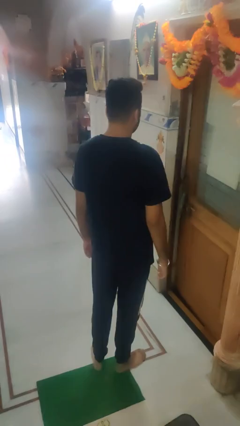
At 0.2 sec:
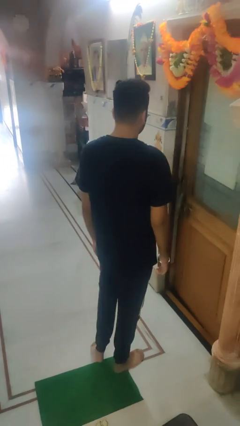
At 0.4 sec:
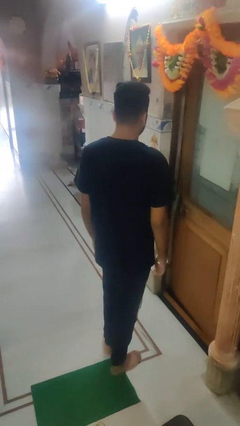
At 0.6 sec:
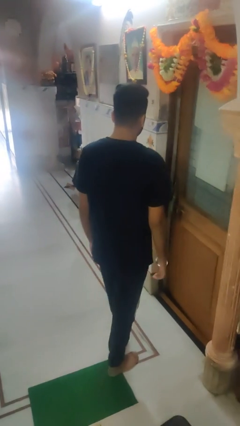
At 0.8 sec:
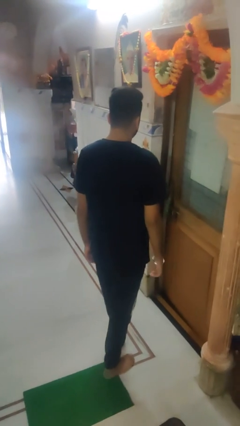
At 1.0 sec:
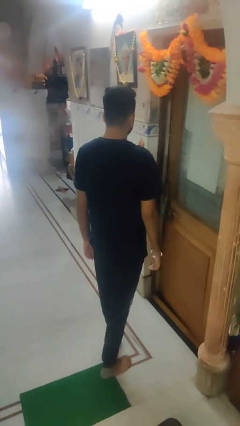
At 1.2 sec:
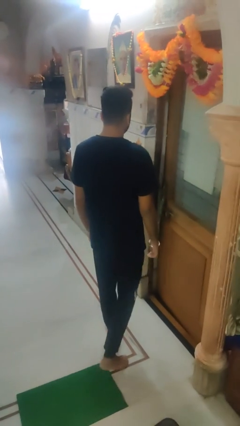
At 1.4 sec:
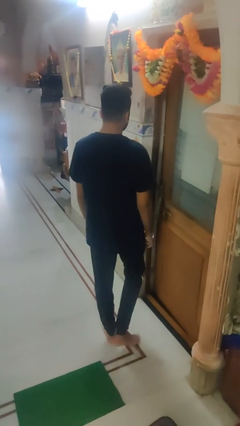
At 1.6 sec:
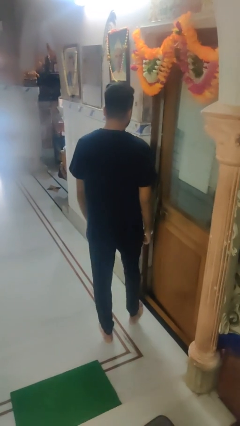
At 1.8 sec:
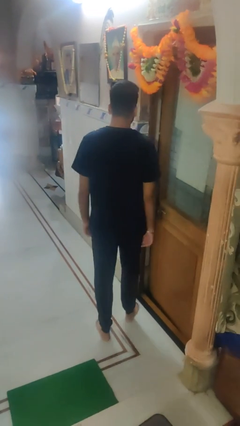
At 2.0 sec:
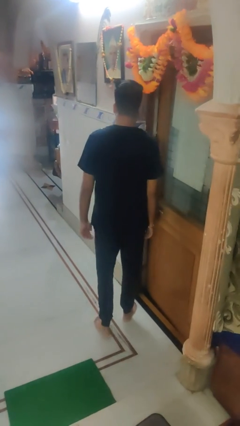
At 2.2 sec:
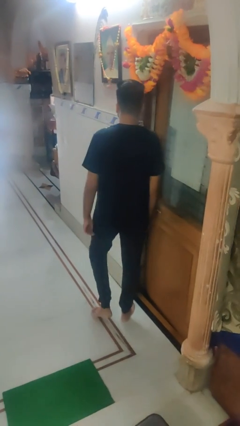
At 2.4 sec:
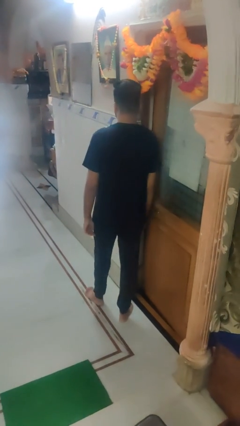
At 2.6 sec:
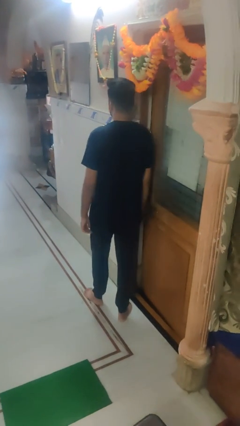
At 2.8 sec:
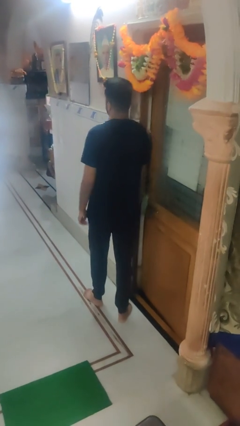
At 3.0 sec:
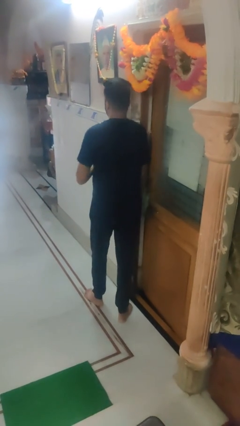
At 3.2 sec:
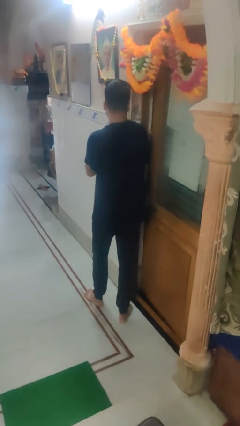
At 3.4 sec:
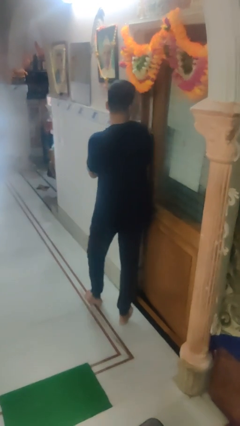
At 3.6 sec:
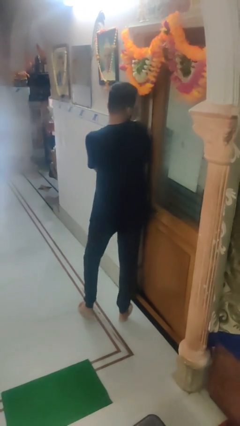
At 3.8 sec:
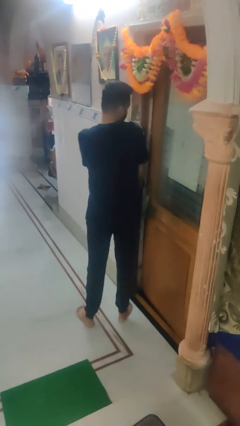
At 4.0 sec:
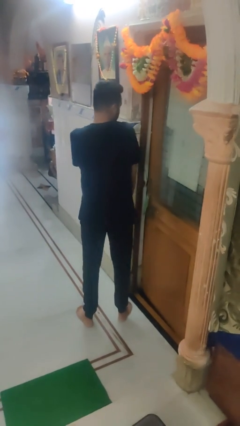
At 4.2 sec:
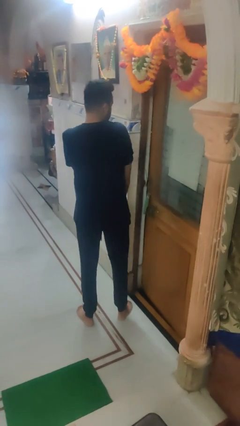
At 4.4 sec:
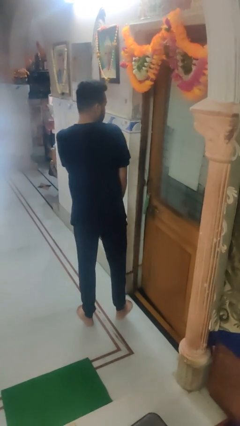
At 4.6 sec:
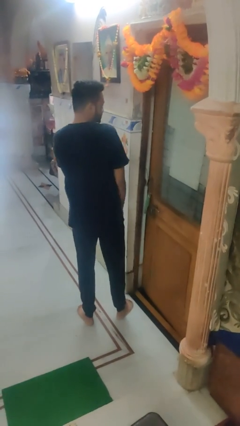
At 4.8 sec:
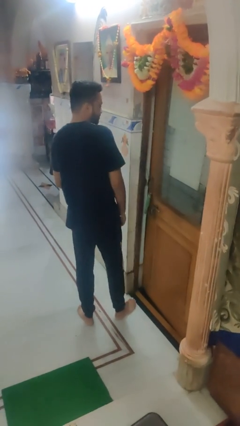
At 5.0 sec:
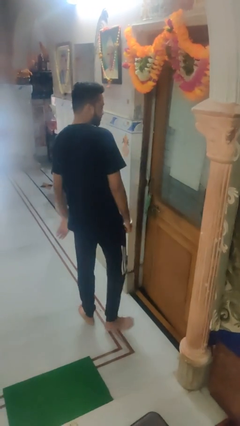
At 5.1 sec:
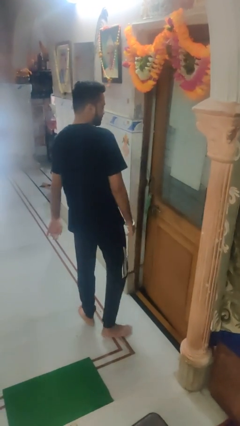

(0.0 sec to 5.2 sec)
person bumps into wall

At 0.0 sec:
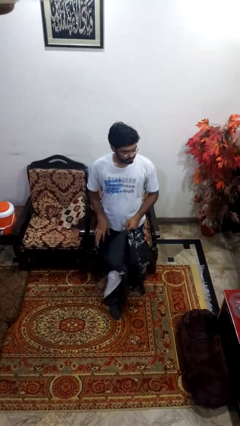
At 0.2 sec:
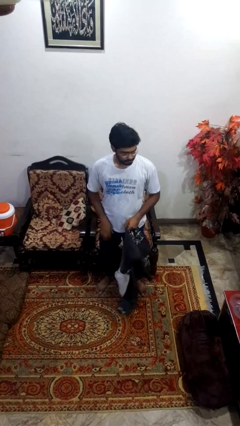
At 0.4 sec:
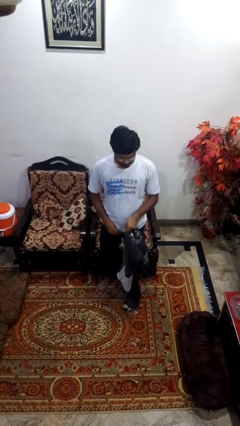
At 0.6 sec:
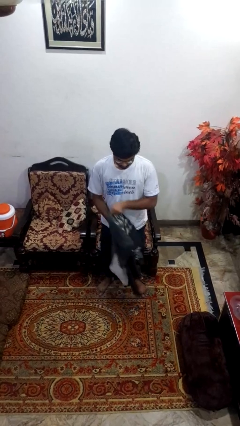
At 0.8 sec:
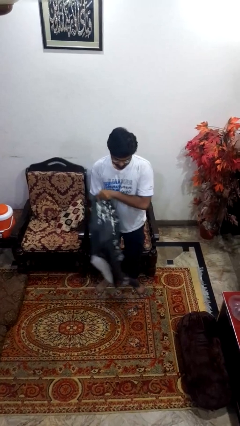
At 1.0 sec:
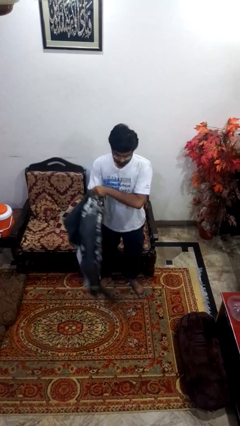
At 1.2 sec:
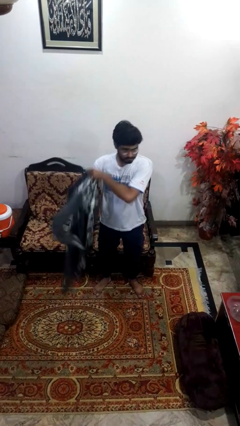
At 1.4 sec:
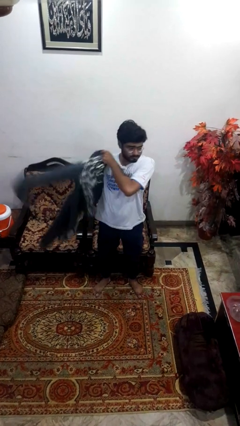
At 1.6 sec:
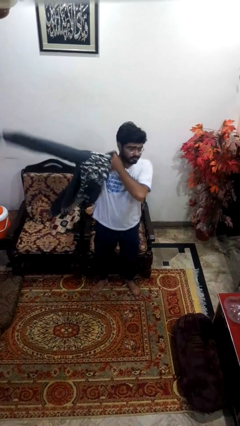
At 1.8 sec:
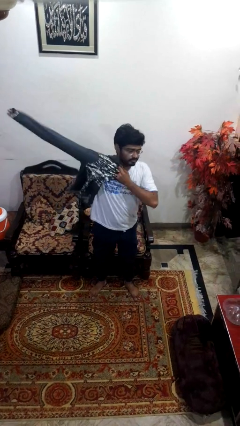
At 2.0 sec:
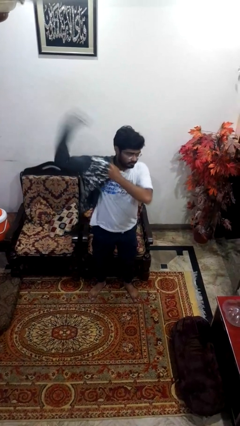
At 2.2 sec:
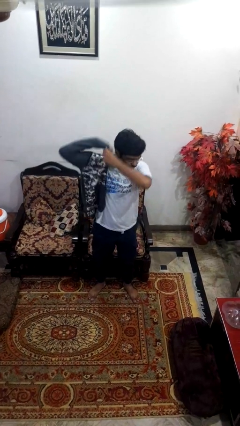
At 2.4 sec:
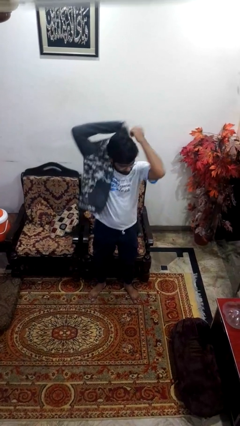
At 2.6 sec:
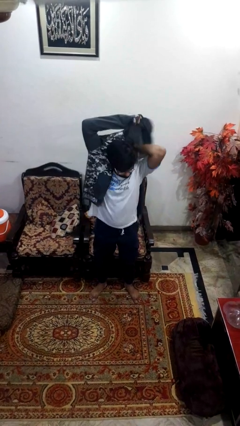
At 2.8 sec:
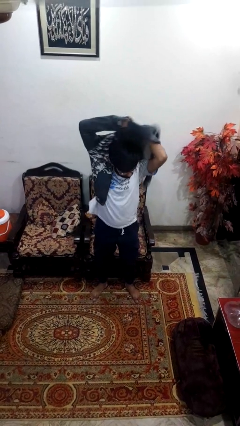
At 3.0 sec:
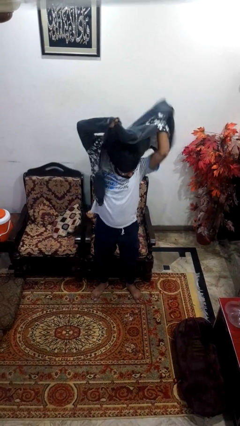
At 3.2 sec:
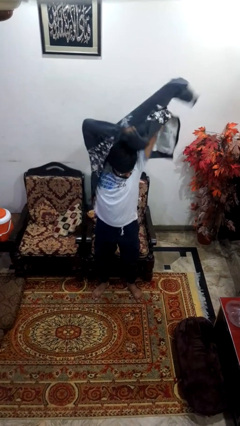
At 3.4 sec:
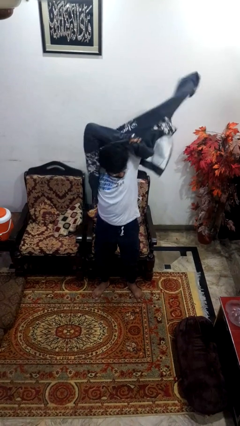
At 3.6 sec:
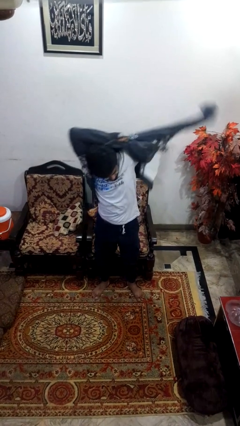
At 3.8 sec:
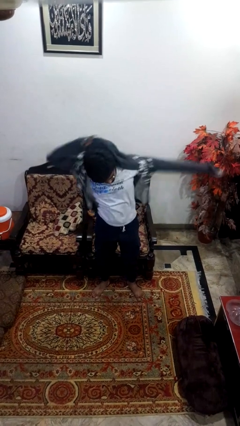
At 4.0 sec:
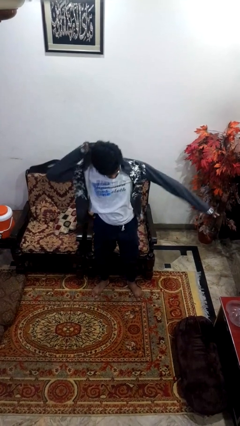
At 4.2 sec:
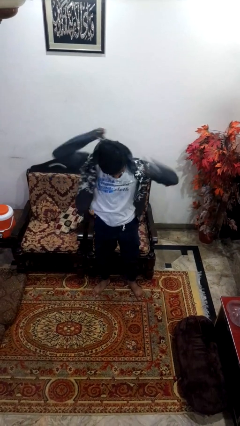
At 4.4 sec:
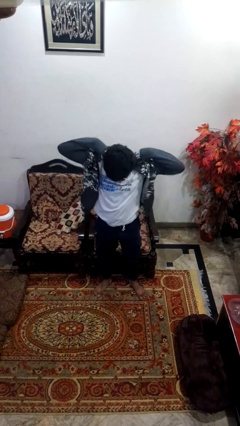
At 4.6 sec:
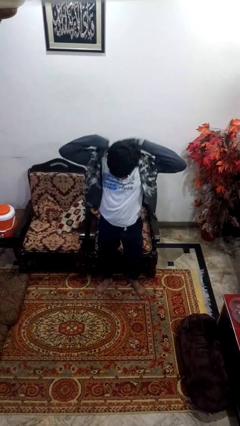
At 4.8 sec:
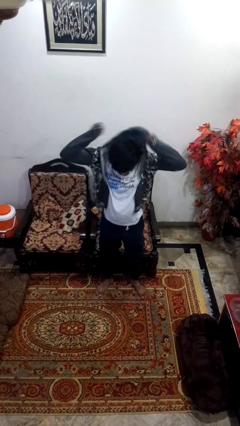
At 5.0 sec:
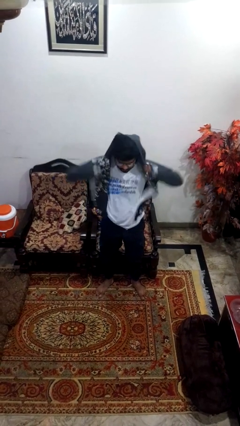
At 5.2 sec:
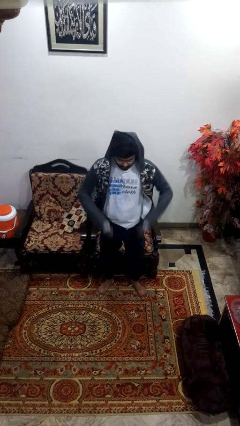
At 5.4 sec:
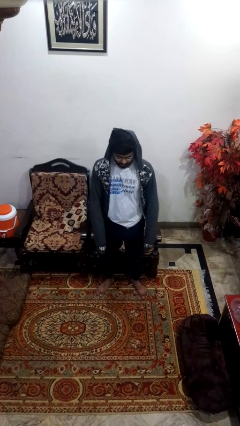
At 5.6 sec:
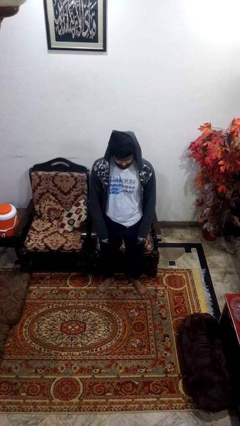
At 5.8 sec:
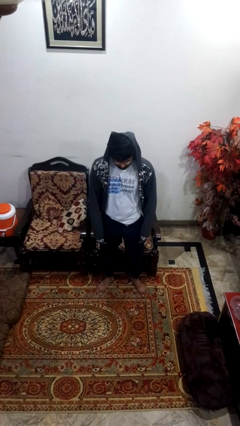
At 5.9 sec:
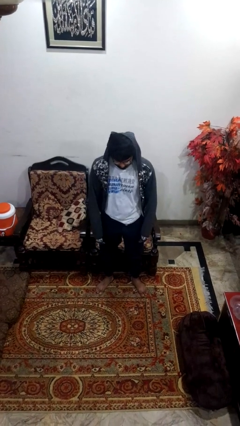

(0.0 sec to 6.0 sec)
person puts on hoodie

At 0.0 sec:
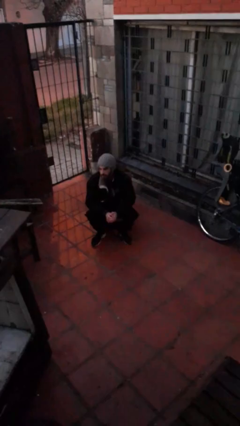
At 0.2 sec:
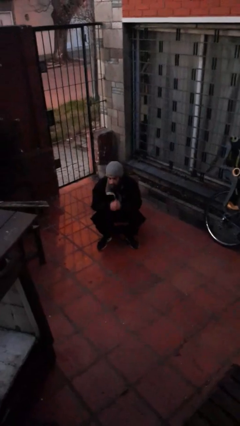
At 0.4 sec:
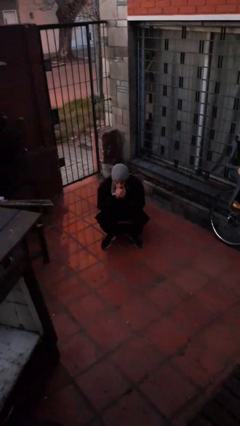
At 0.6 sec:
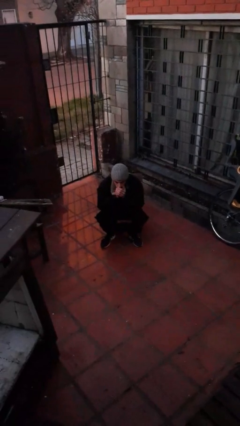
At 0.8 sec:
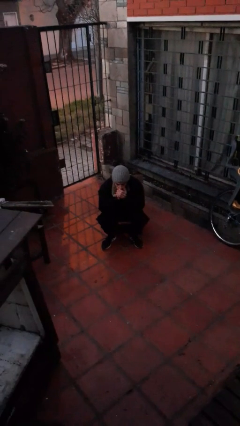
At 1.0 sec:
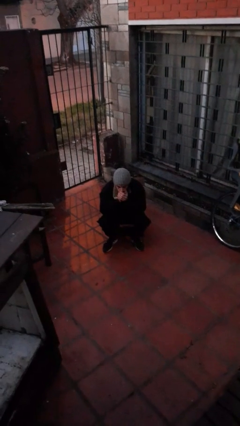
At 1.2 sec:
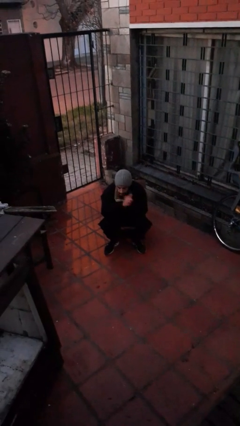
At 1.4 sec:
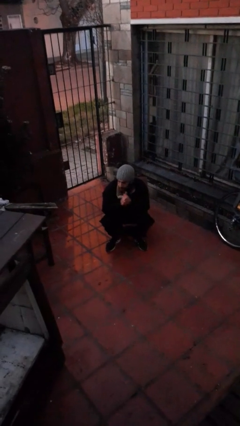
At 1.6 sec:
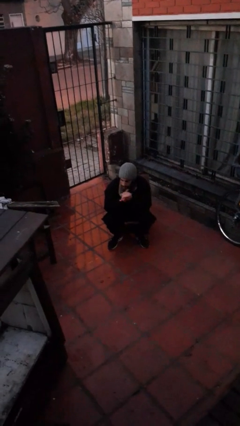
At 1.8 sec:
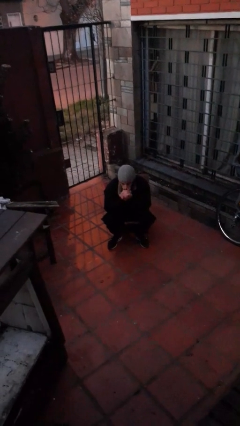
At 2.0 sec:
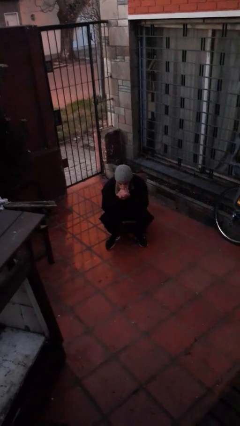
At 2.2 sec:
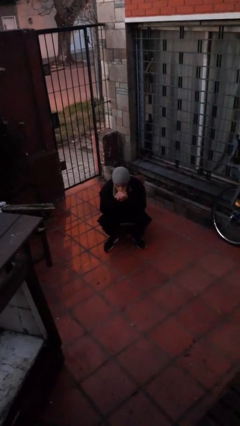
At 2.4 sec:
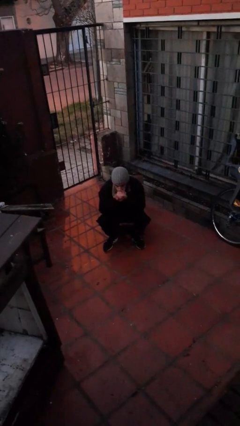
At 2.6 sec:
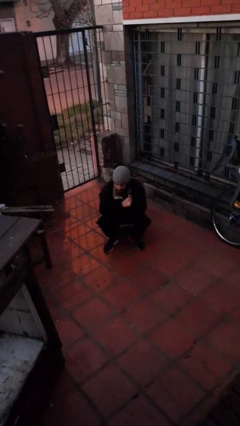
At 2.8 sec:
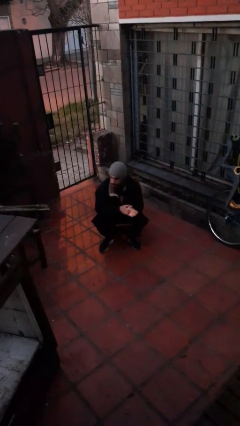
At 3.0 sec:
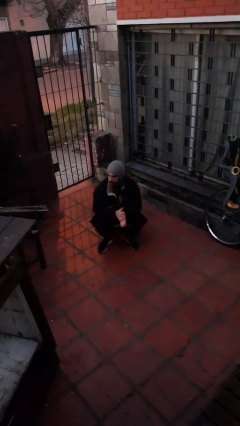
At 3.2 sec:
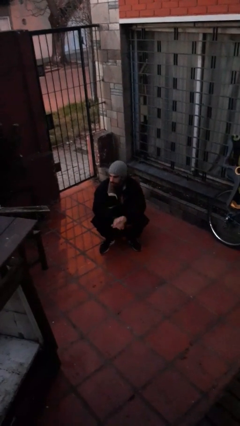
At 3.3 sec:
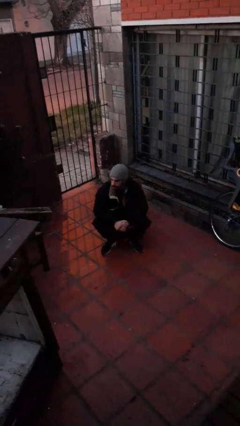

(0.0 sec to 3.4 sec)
person blows into hands

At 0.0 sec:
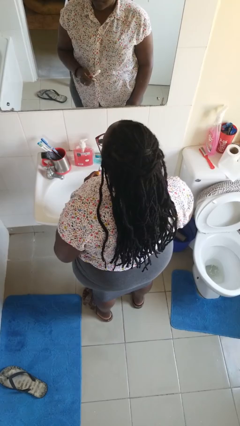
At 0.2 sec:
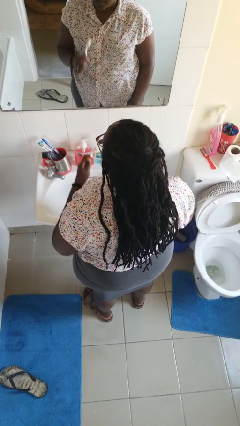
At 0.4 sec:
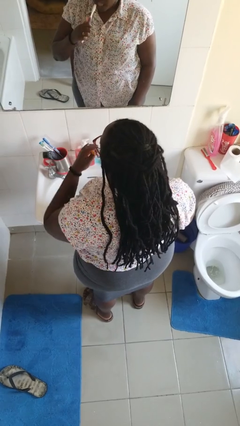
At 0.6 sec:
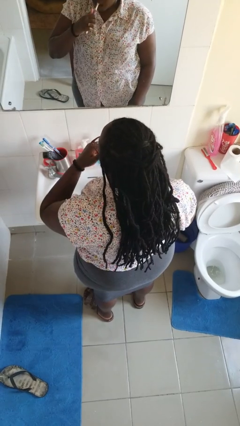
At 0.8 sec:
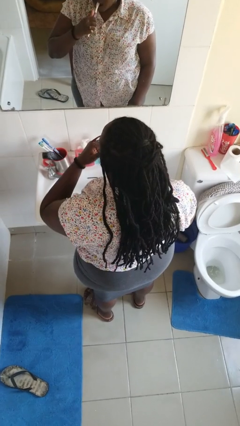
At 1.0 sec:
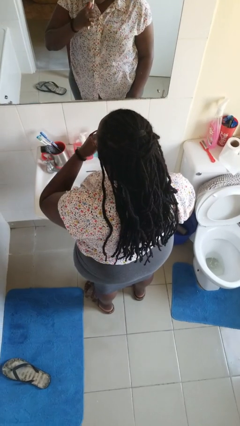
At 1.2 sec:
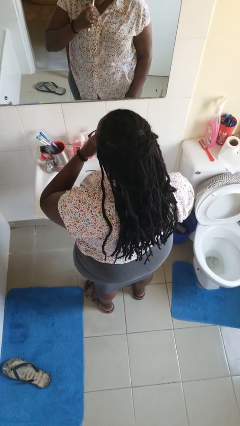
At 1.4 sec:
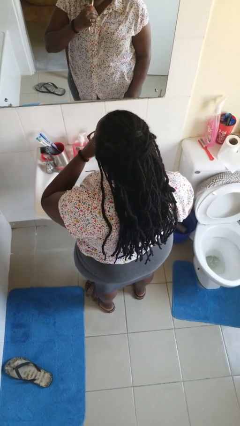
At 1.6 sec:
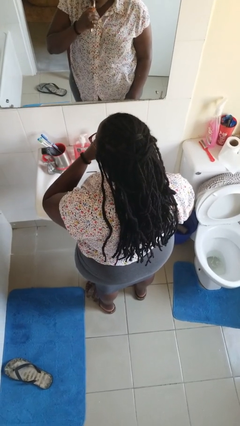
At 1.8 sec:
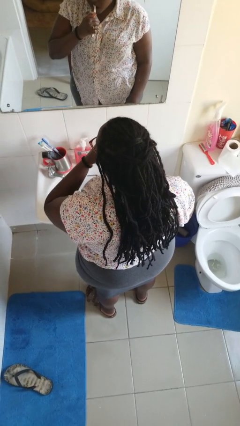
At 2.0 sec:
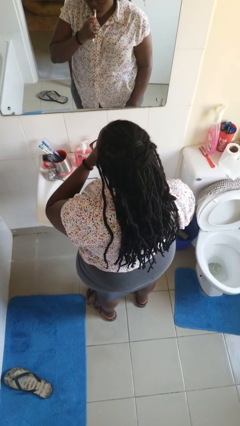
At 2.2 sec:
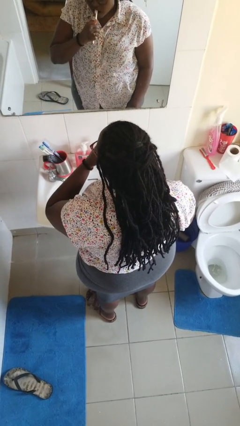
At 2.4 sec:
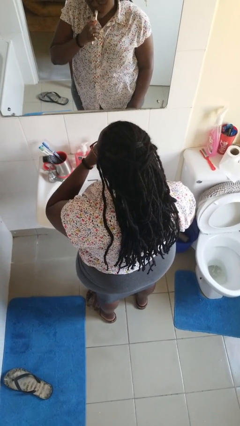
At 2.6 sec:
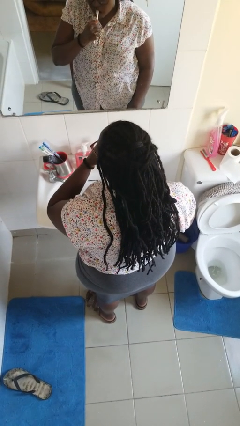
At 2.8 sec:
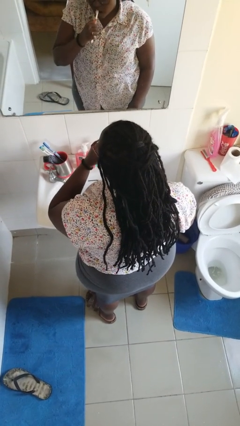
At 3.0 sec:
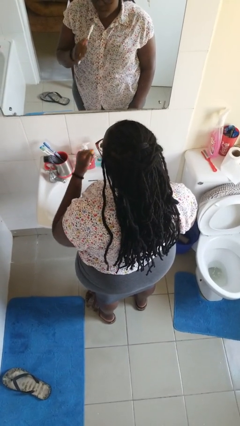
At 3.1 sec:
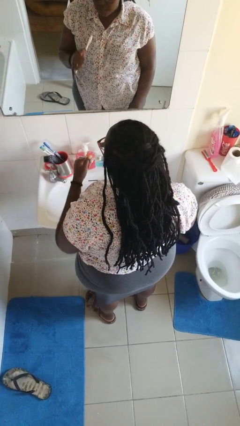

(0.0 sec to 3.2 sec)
person brushes teeth
